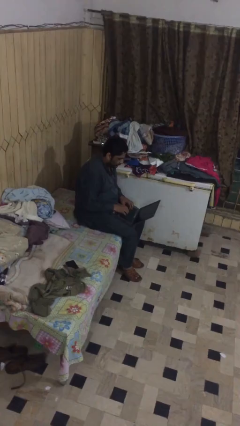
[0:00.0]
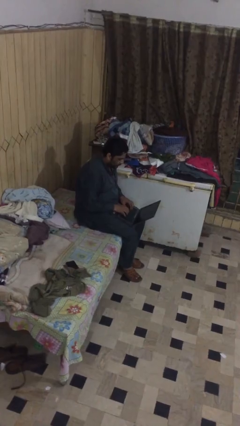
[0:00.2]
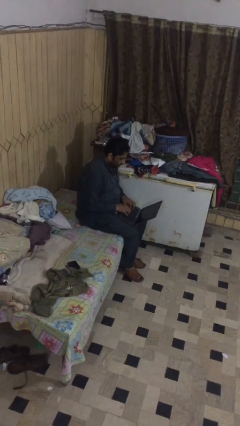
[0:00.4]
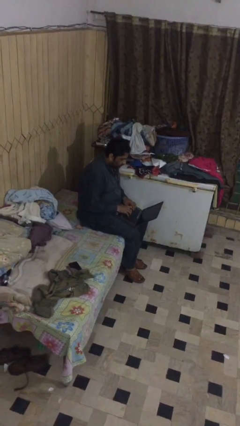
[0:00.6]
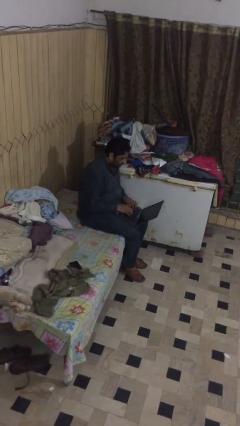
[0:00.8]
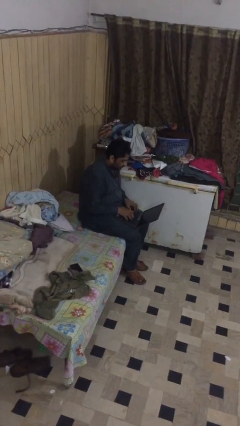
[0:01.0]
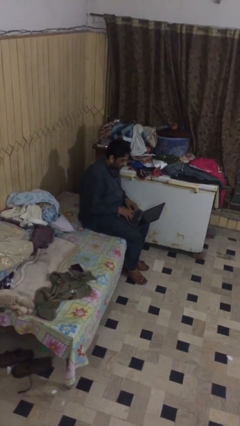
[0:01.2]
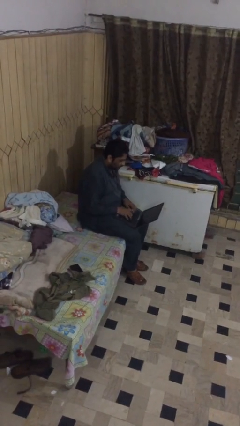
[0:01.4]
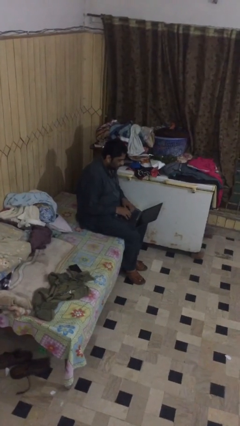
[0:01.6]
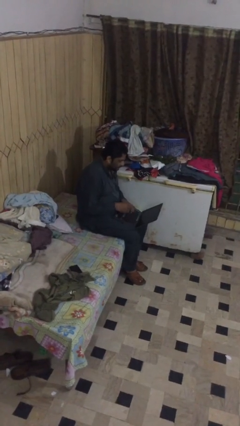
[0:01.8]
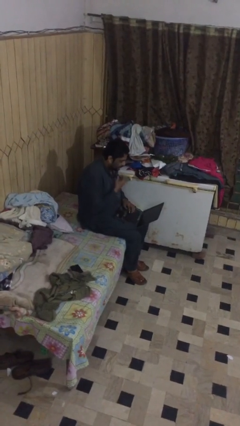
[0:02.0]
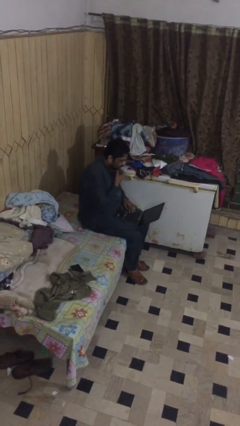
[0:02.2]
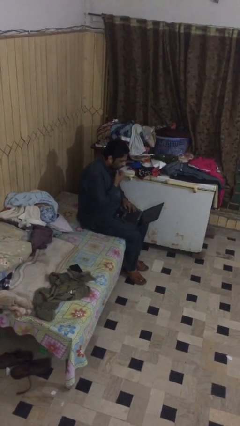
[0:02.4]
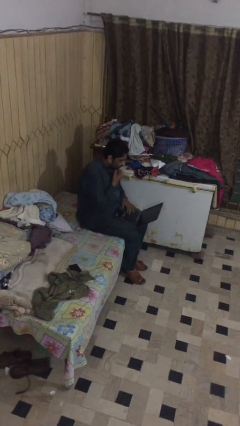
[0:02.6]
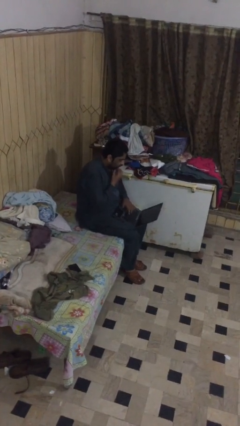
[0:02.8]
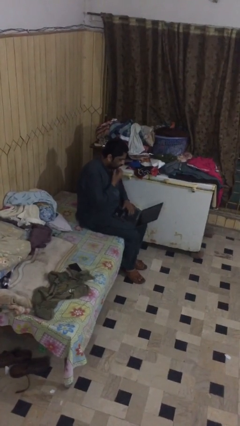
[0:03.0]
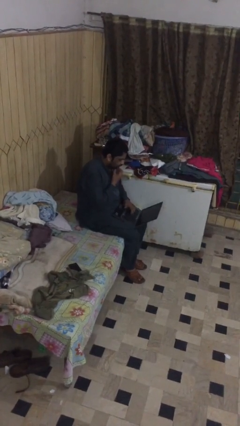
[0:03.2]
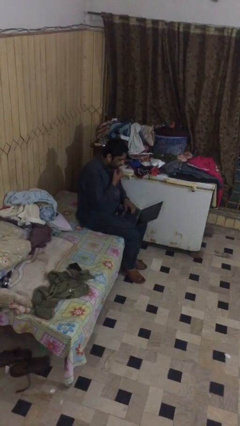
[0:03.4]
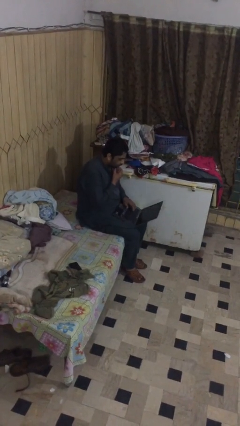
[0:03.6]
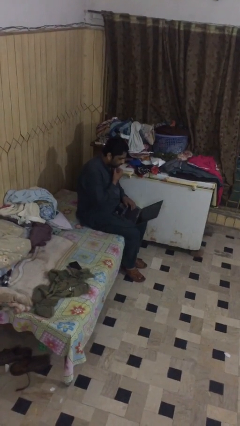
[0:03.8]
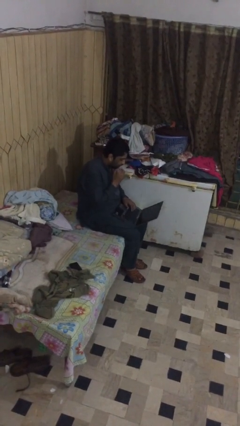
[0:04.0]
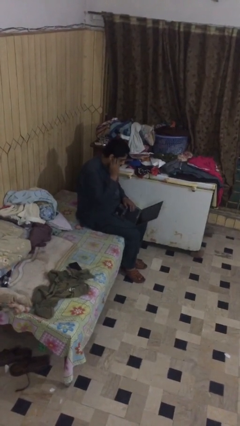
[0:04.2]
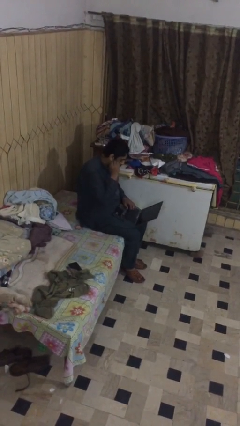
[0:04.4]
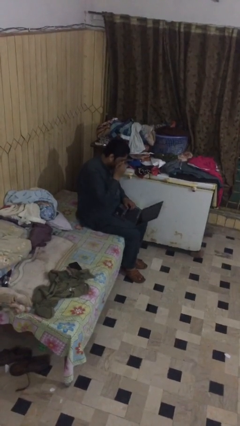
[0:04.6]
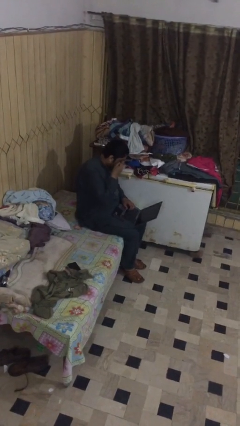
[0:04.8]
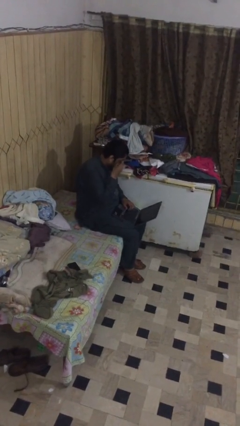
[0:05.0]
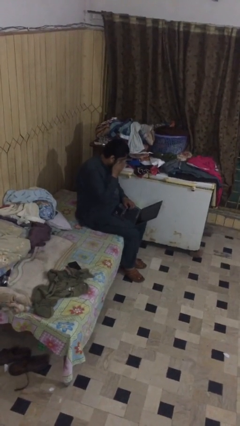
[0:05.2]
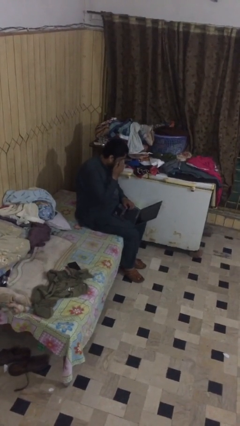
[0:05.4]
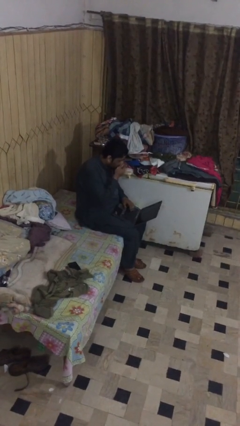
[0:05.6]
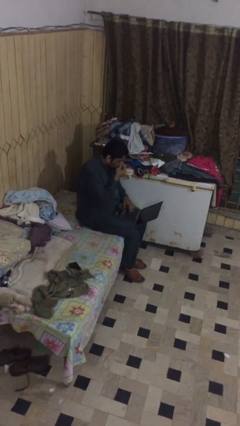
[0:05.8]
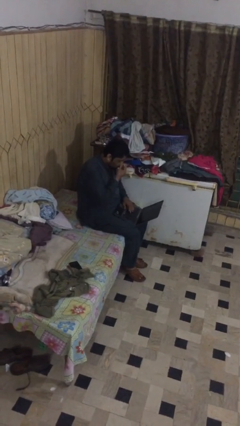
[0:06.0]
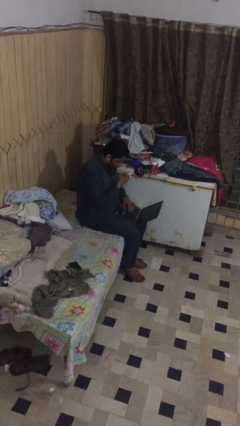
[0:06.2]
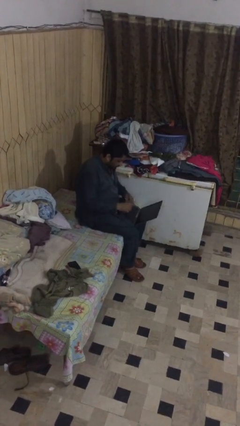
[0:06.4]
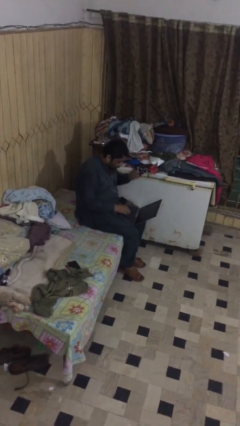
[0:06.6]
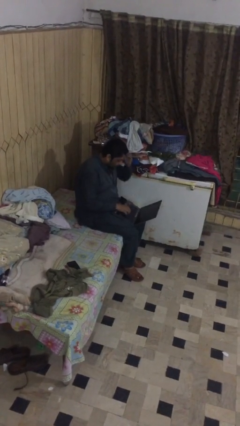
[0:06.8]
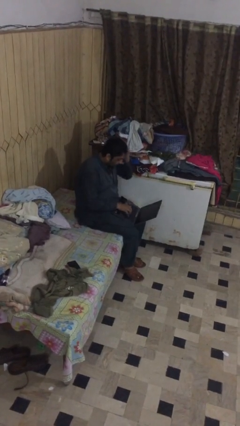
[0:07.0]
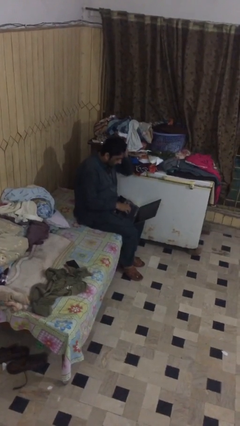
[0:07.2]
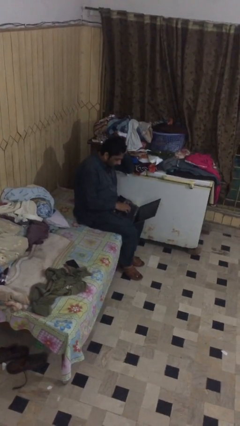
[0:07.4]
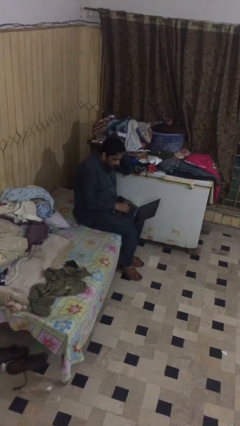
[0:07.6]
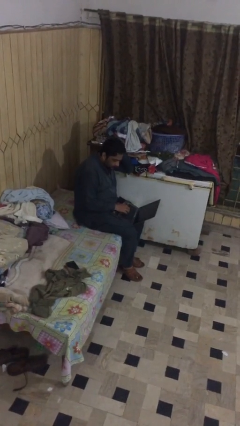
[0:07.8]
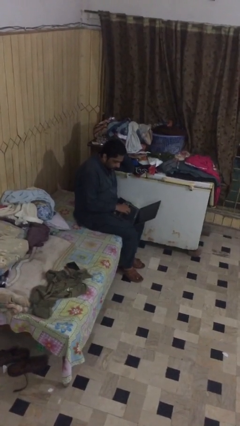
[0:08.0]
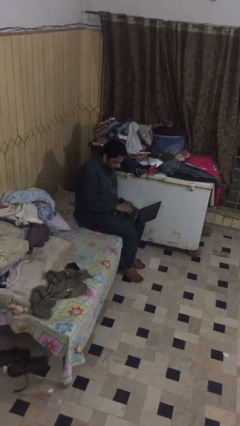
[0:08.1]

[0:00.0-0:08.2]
person interacts with laptop

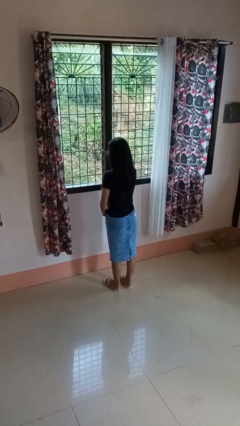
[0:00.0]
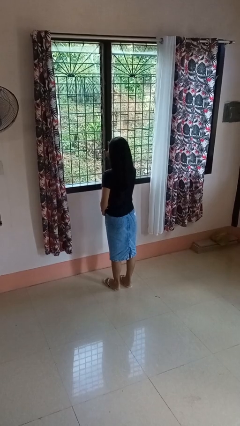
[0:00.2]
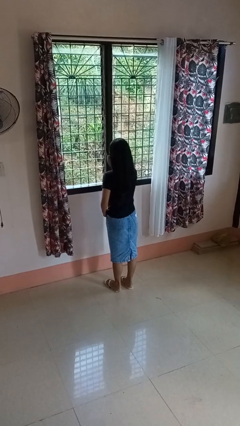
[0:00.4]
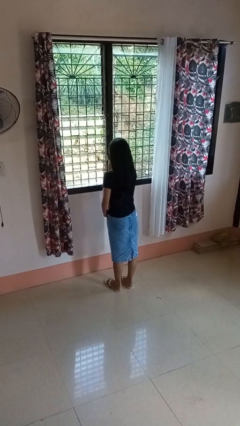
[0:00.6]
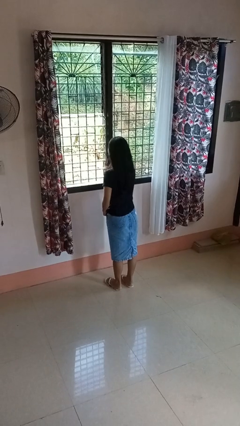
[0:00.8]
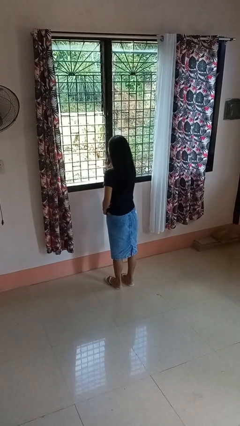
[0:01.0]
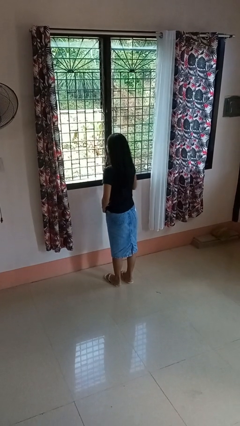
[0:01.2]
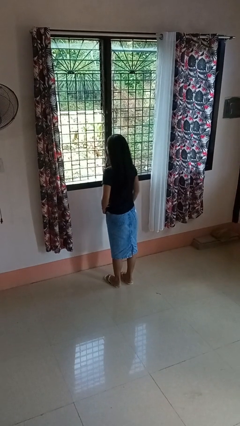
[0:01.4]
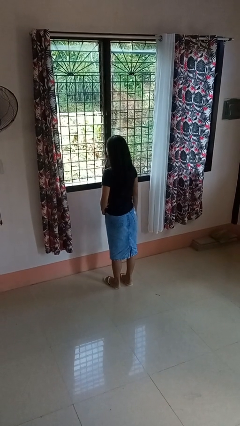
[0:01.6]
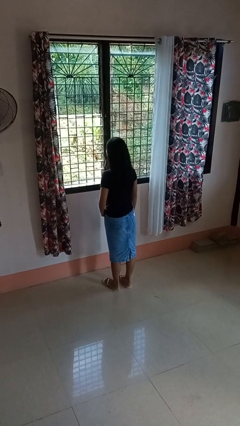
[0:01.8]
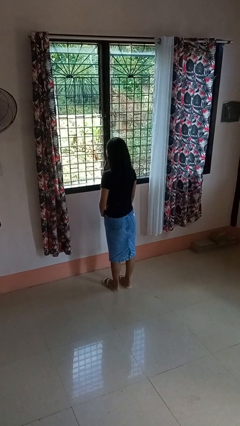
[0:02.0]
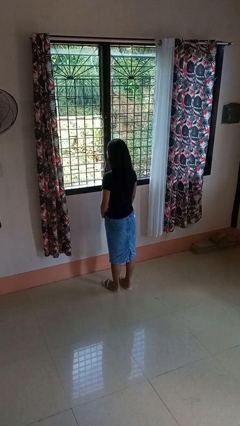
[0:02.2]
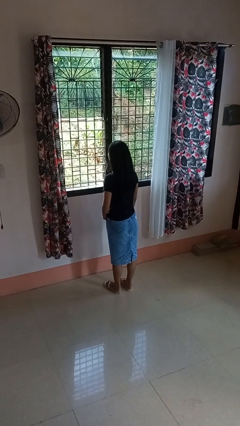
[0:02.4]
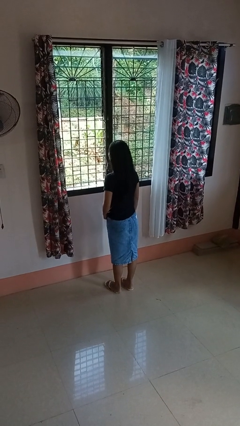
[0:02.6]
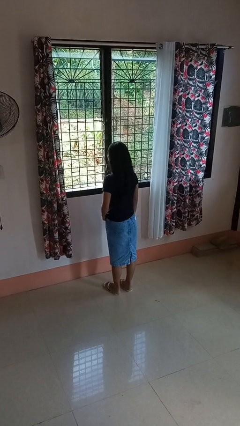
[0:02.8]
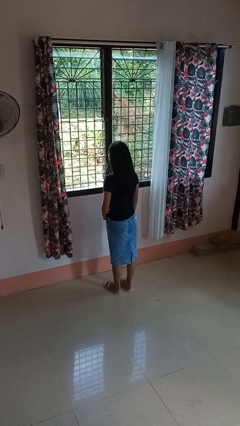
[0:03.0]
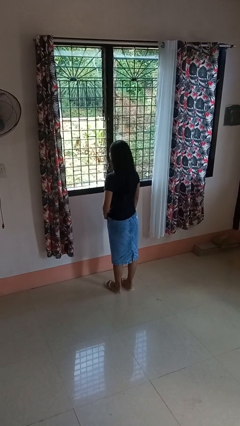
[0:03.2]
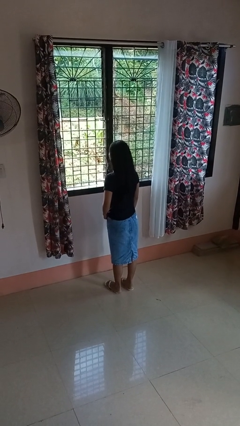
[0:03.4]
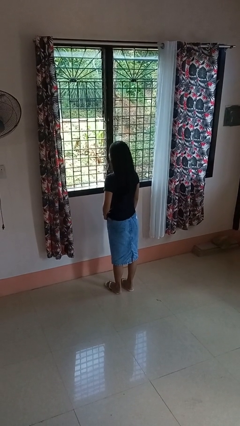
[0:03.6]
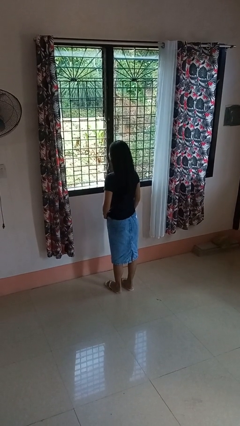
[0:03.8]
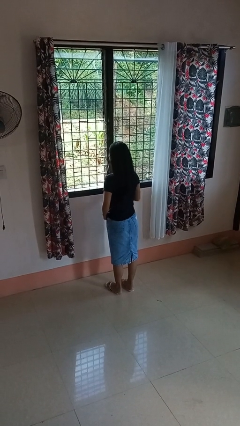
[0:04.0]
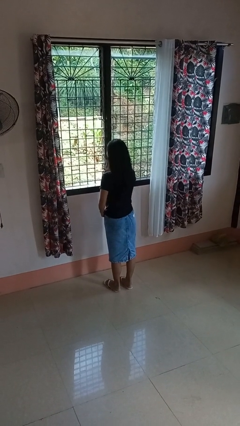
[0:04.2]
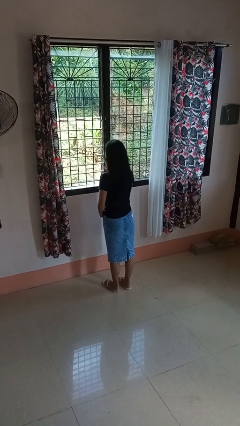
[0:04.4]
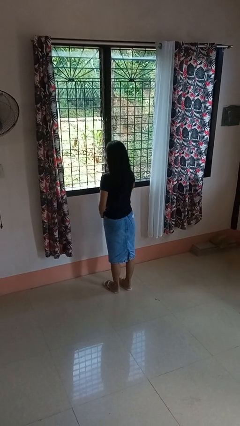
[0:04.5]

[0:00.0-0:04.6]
person opens home window

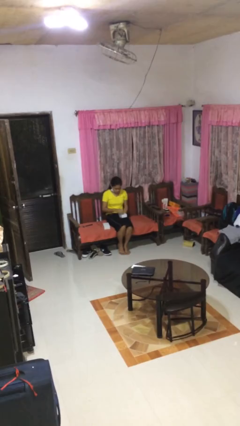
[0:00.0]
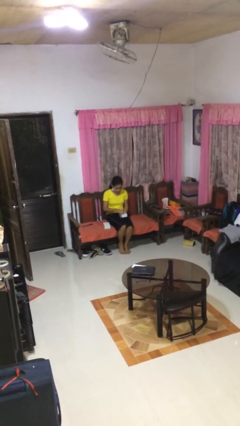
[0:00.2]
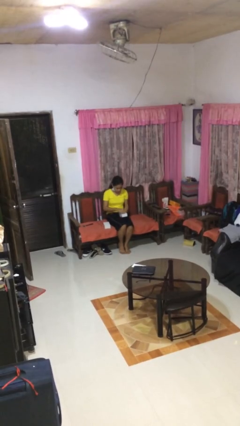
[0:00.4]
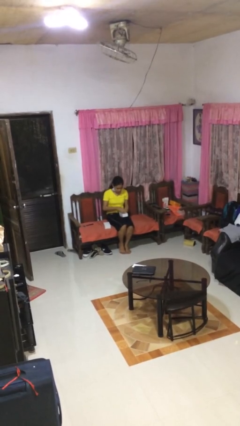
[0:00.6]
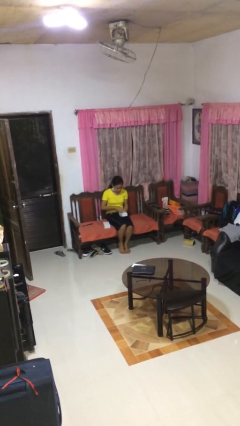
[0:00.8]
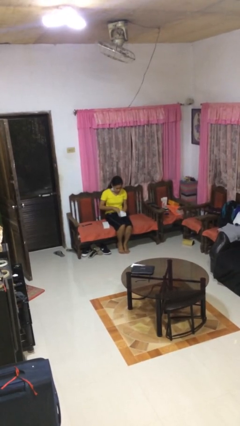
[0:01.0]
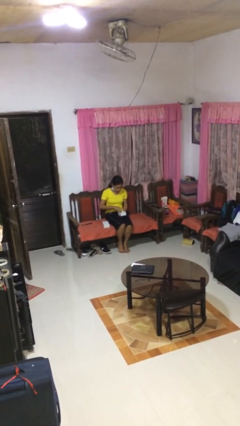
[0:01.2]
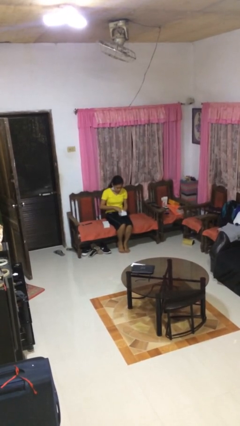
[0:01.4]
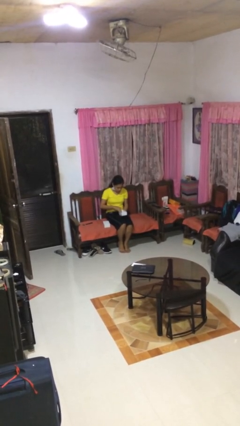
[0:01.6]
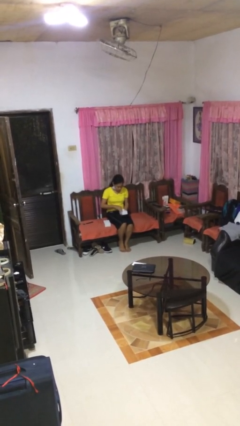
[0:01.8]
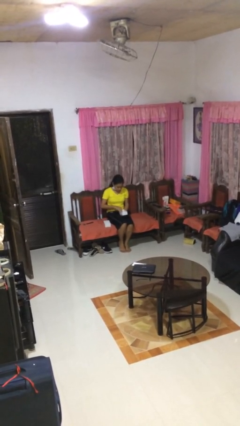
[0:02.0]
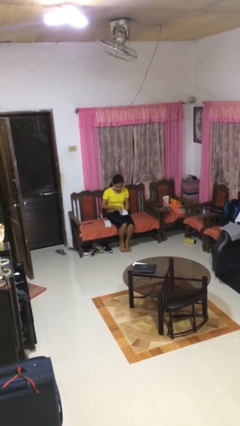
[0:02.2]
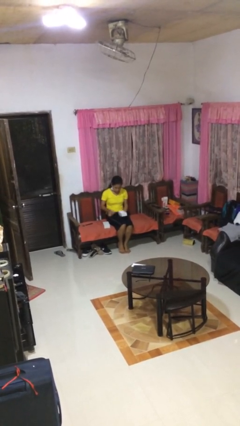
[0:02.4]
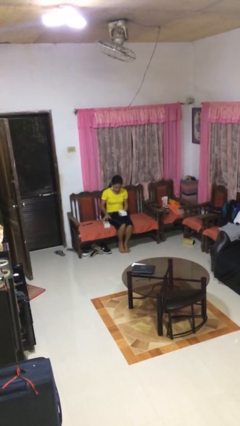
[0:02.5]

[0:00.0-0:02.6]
person searches jewelry box

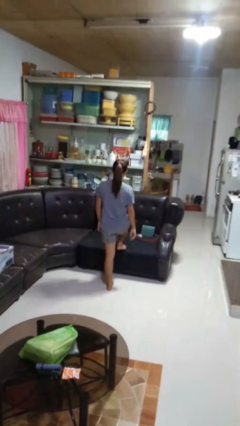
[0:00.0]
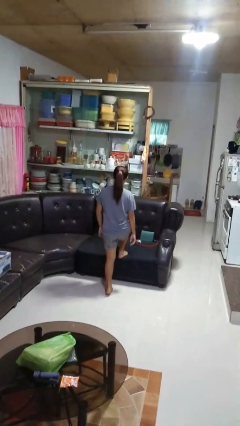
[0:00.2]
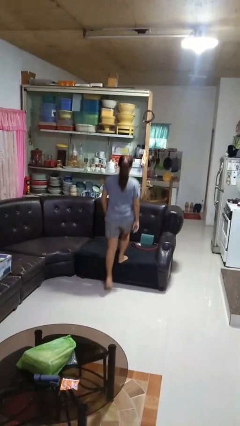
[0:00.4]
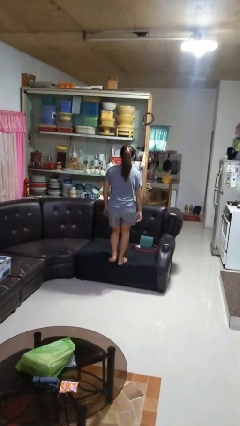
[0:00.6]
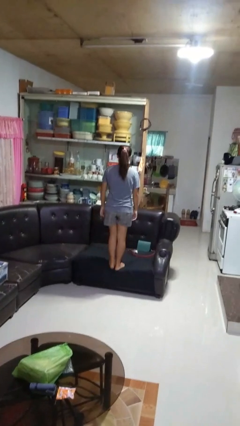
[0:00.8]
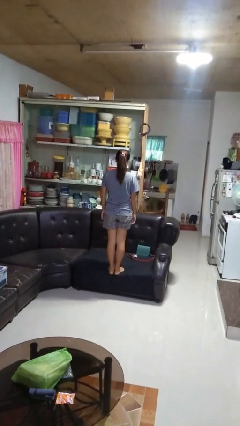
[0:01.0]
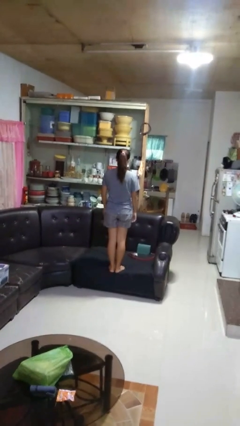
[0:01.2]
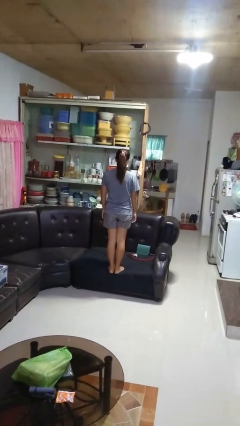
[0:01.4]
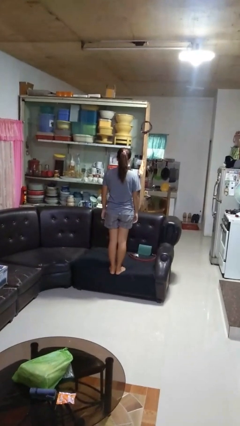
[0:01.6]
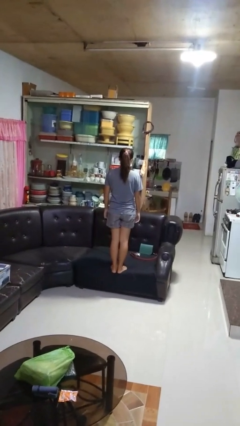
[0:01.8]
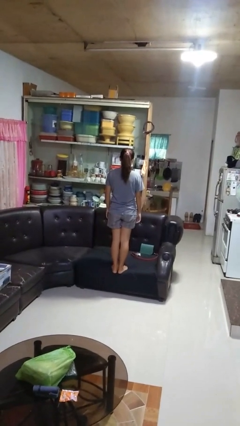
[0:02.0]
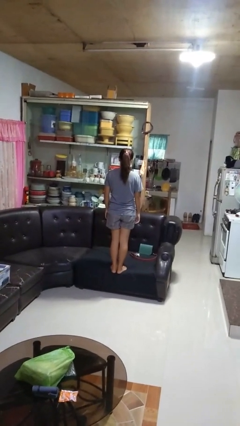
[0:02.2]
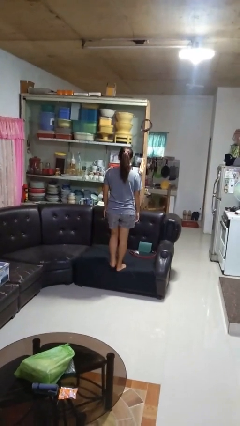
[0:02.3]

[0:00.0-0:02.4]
person climbs on couch
